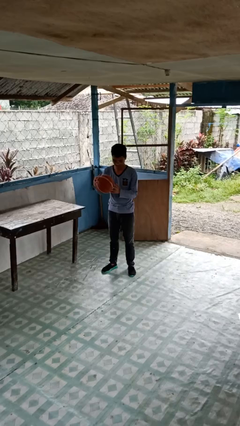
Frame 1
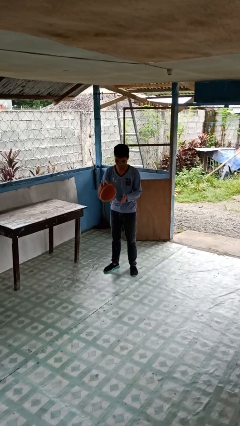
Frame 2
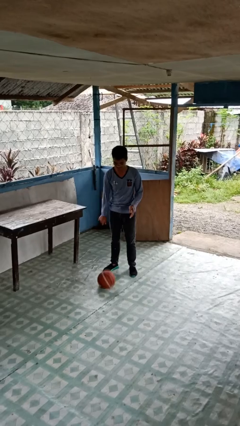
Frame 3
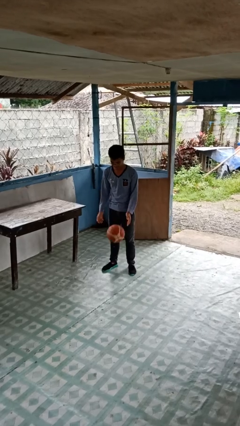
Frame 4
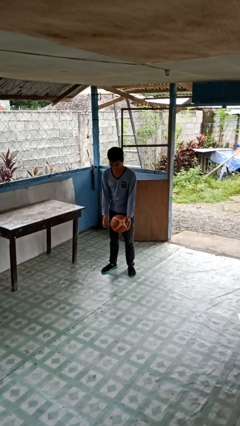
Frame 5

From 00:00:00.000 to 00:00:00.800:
person bounces ball on floor

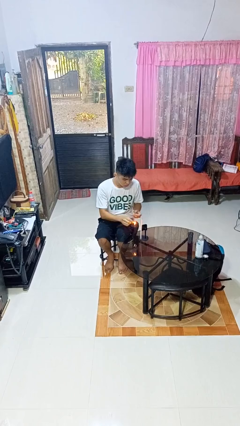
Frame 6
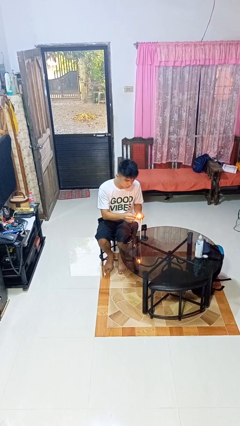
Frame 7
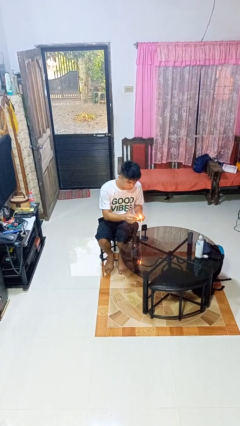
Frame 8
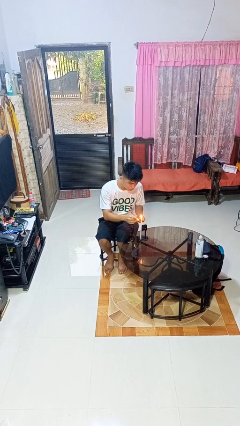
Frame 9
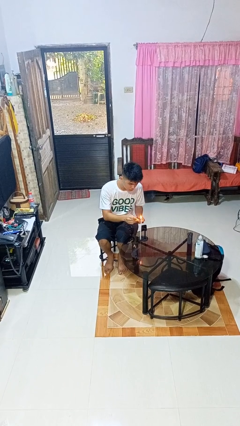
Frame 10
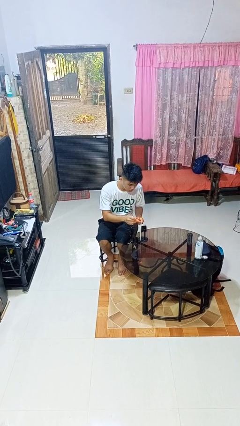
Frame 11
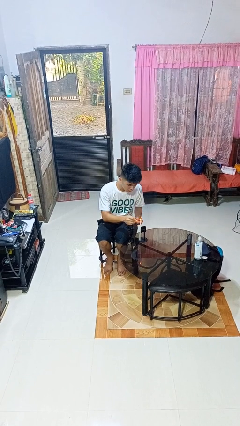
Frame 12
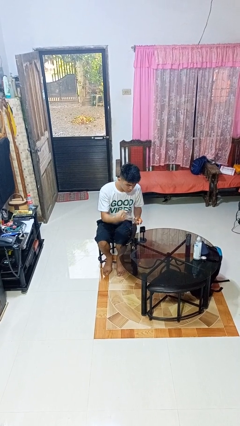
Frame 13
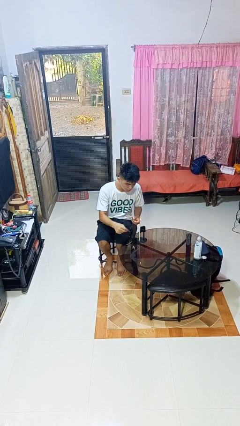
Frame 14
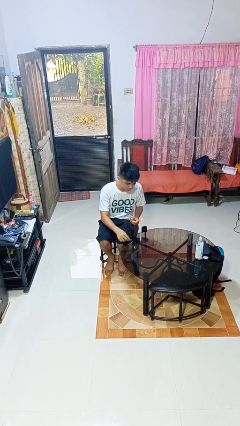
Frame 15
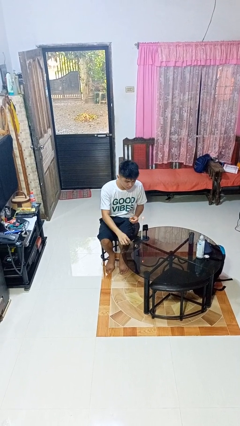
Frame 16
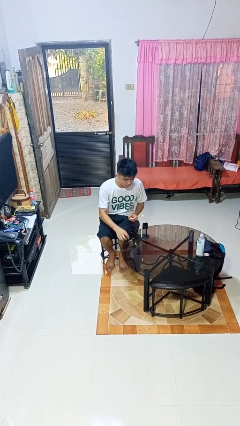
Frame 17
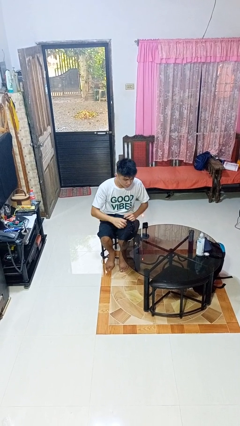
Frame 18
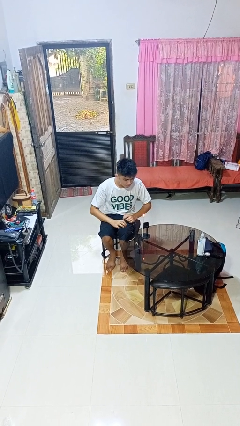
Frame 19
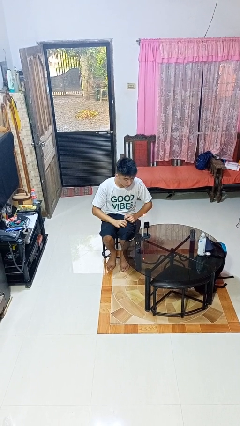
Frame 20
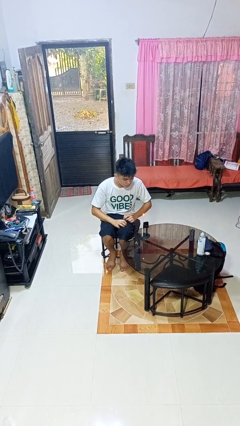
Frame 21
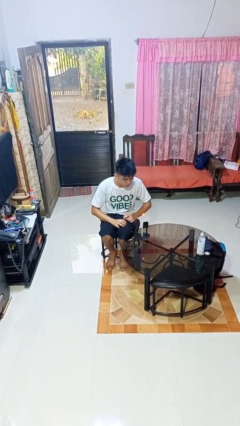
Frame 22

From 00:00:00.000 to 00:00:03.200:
person lights candle

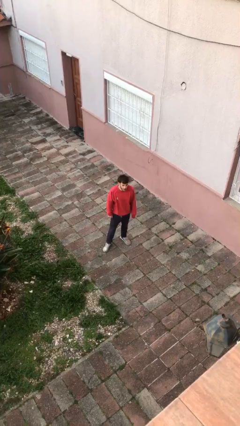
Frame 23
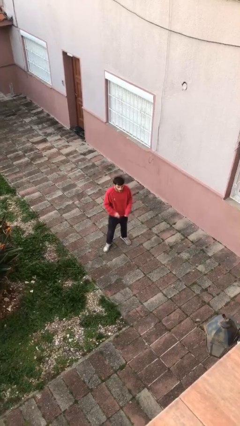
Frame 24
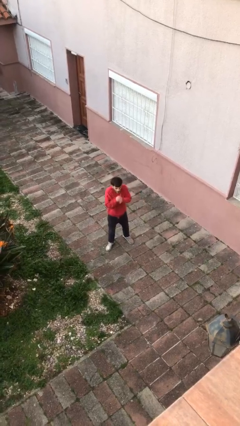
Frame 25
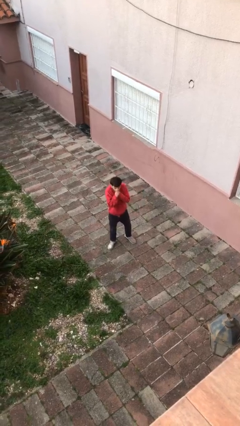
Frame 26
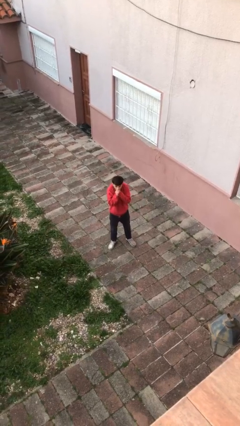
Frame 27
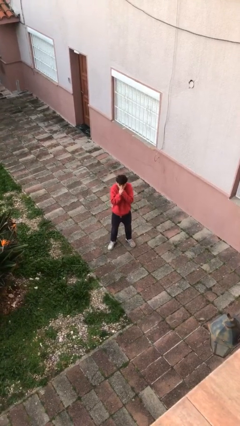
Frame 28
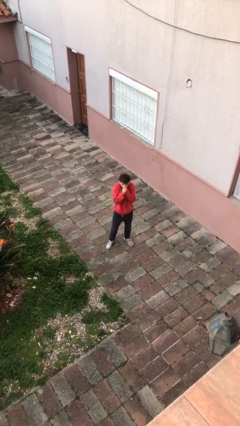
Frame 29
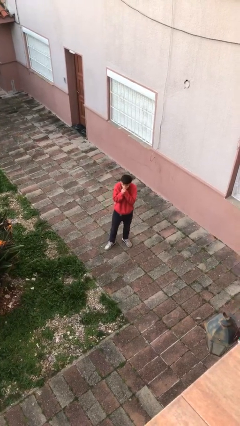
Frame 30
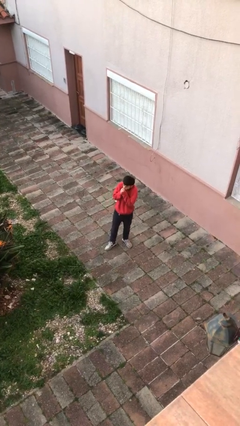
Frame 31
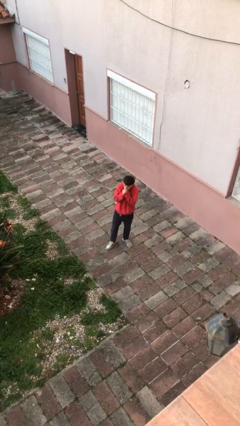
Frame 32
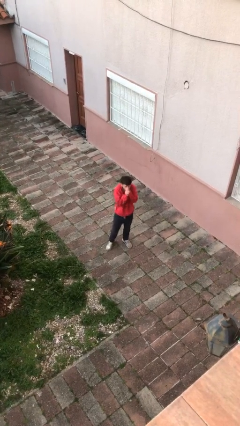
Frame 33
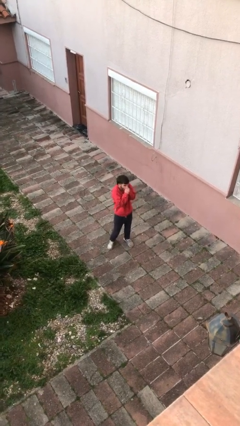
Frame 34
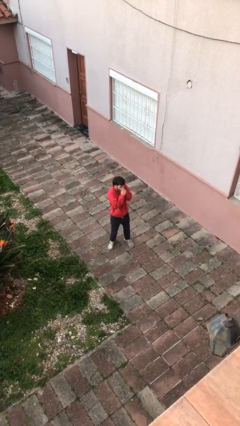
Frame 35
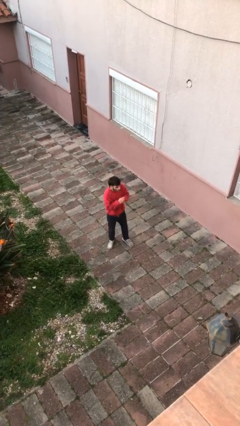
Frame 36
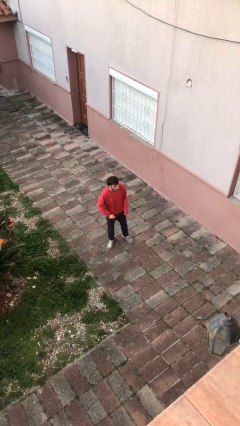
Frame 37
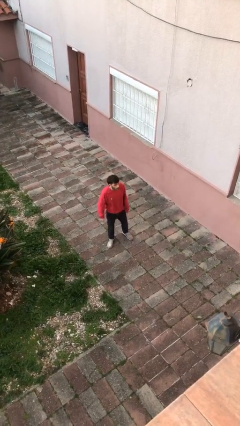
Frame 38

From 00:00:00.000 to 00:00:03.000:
person blows into hands

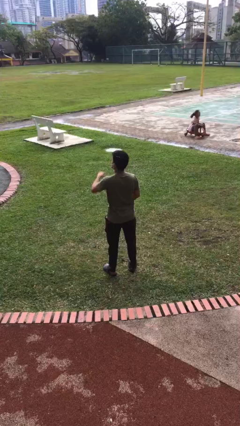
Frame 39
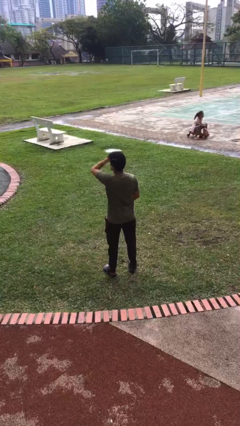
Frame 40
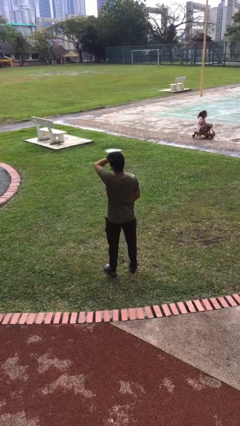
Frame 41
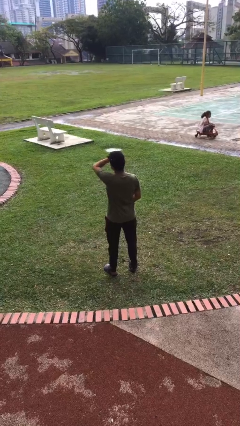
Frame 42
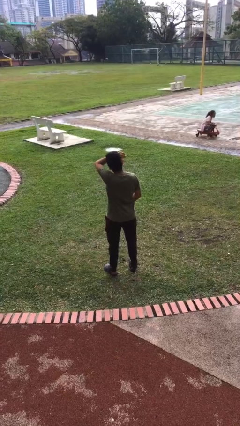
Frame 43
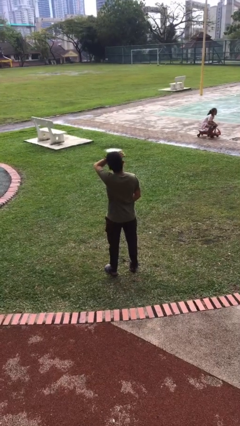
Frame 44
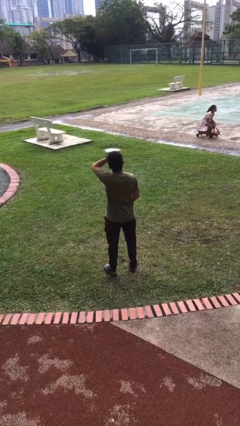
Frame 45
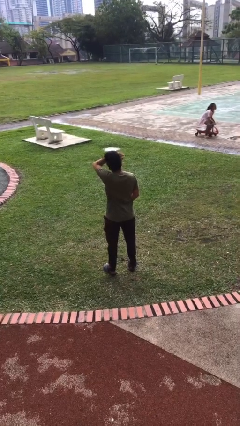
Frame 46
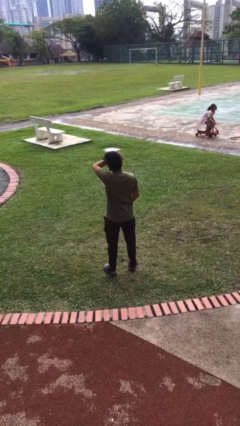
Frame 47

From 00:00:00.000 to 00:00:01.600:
person rubs eyes

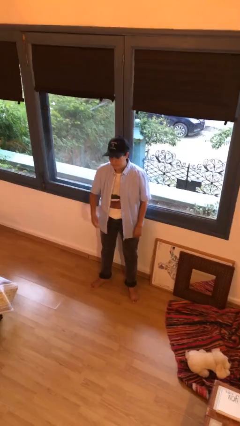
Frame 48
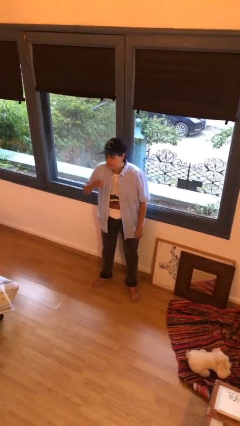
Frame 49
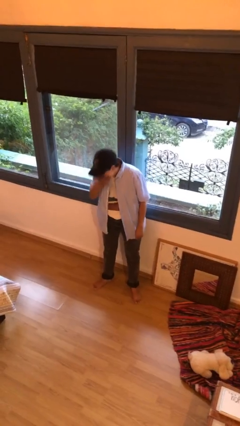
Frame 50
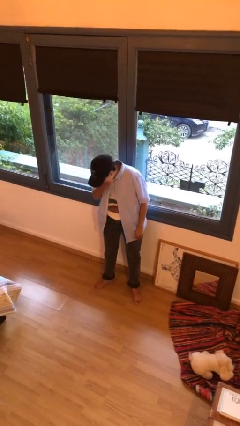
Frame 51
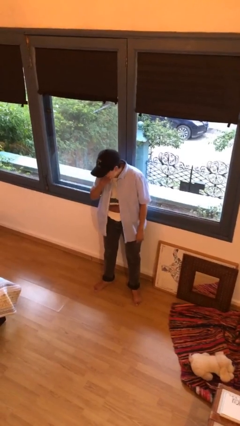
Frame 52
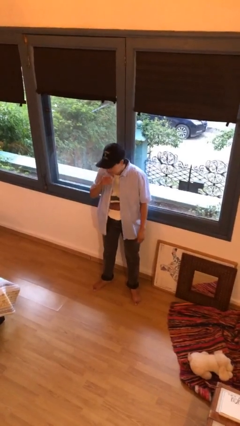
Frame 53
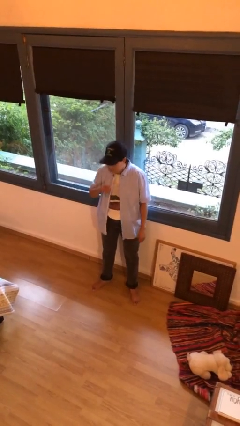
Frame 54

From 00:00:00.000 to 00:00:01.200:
person sneezes into hand

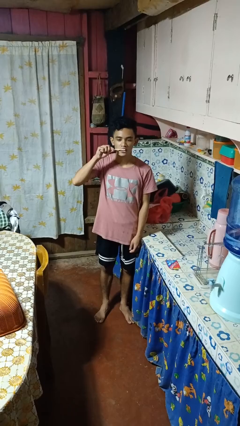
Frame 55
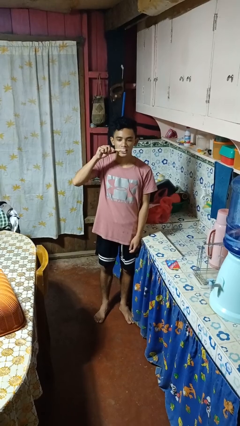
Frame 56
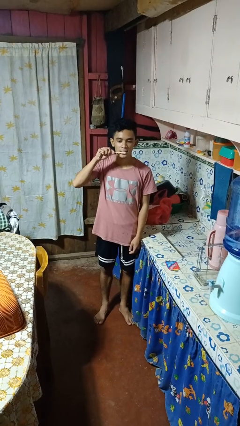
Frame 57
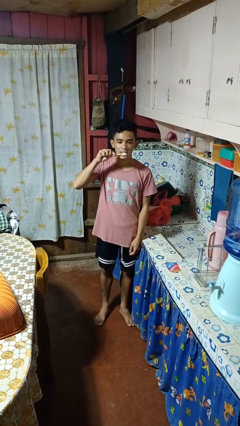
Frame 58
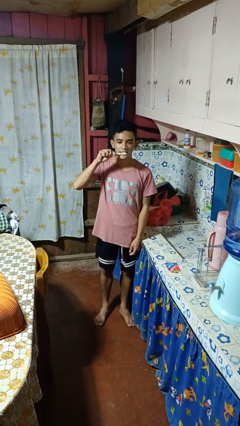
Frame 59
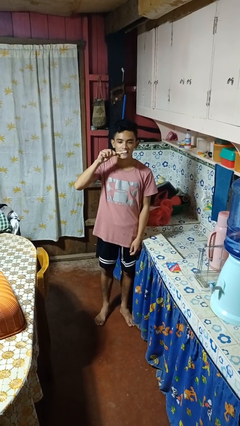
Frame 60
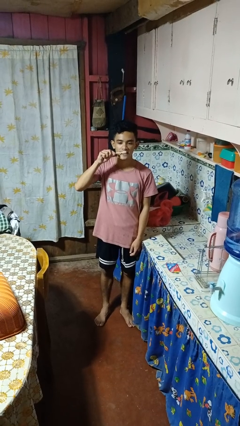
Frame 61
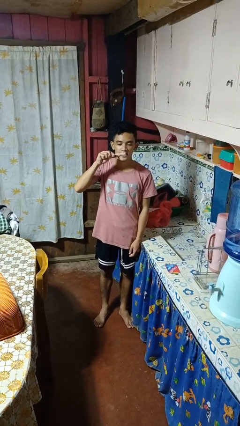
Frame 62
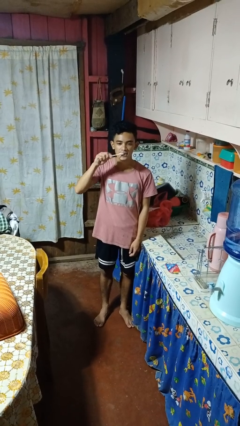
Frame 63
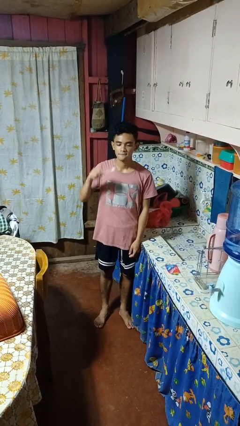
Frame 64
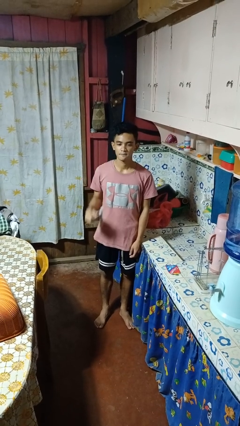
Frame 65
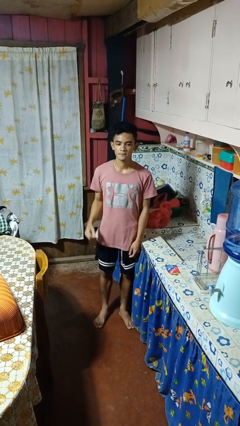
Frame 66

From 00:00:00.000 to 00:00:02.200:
person brushes teeth

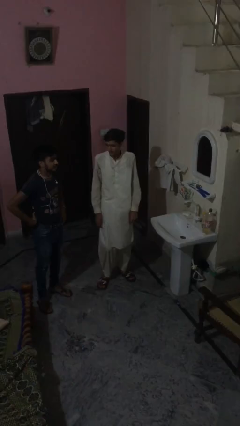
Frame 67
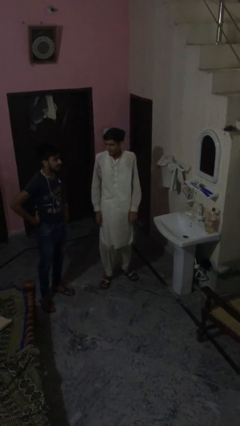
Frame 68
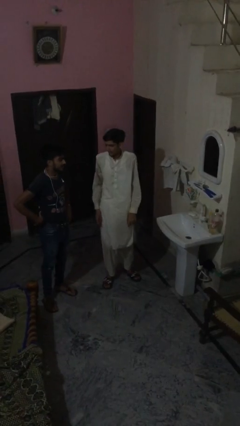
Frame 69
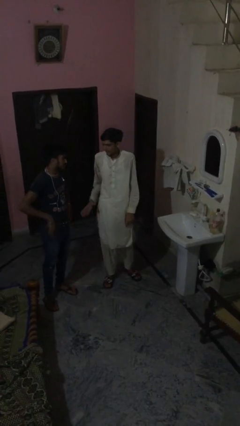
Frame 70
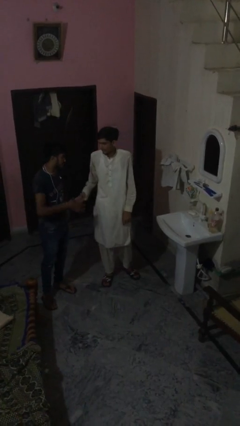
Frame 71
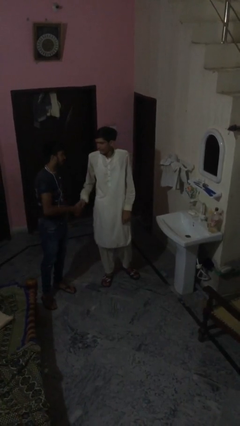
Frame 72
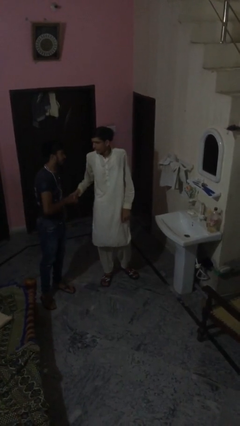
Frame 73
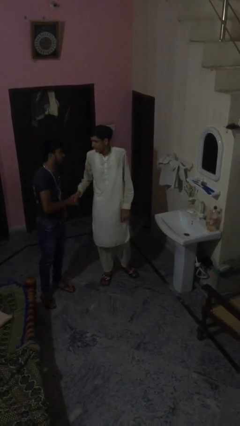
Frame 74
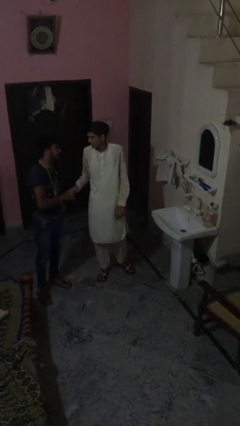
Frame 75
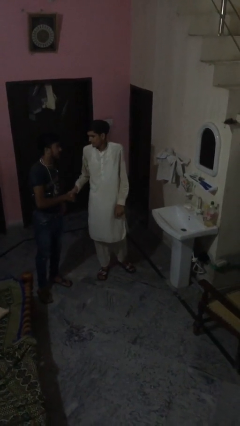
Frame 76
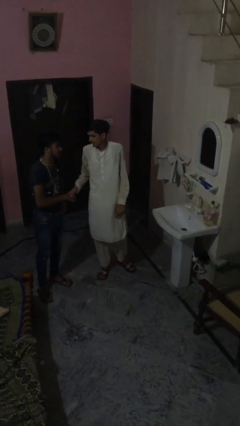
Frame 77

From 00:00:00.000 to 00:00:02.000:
person shakes hand

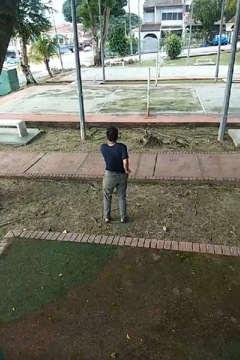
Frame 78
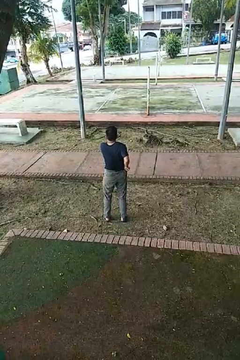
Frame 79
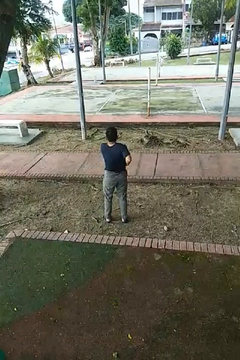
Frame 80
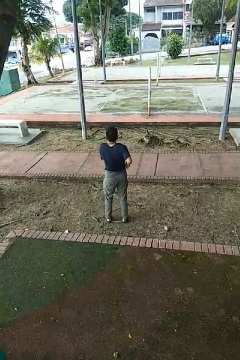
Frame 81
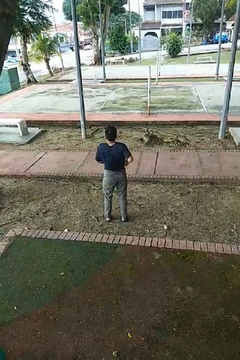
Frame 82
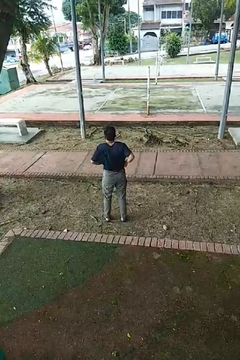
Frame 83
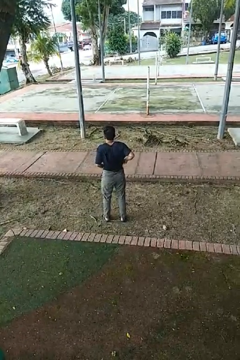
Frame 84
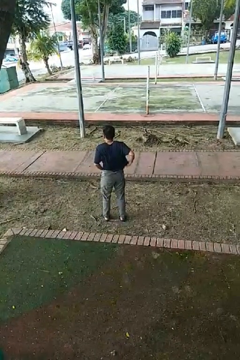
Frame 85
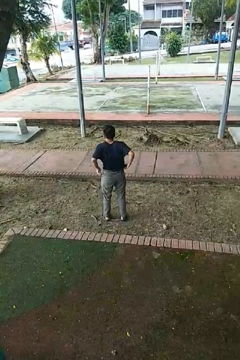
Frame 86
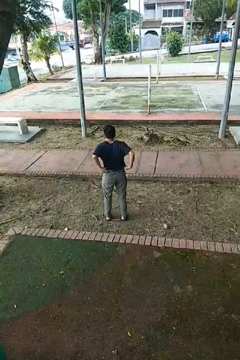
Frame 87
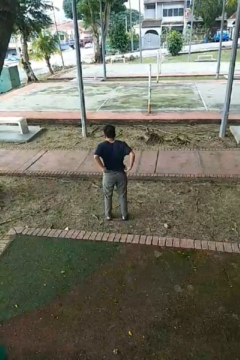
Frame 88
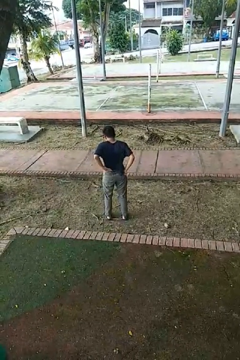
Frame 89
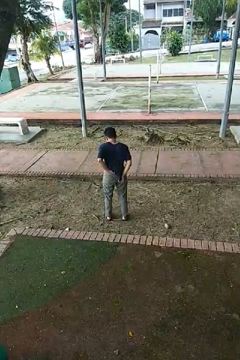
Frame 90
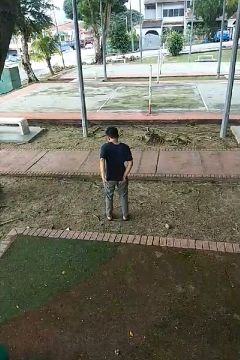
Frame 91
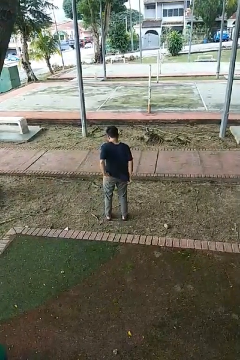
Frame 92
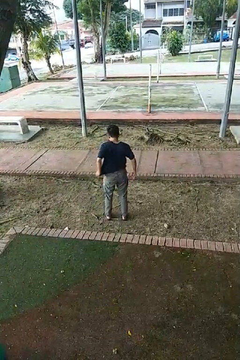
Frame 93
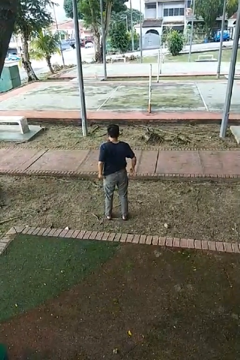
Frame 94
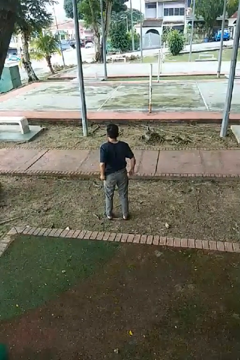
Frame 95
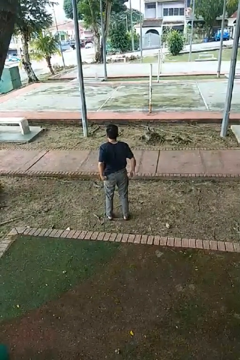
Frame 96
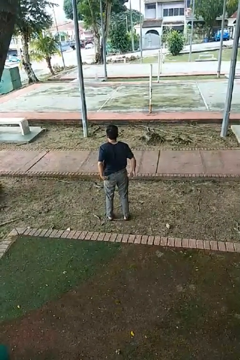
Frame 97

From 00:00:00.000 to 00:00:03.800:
person untucks shirt

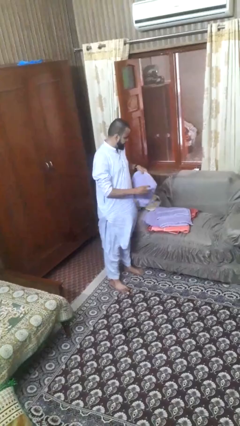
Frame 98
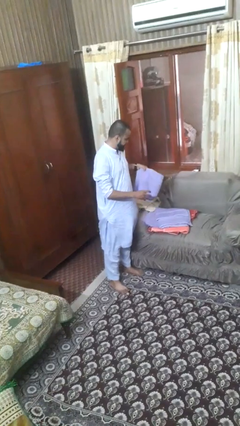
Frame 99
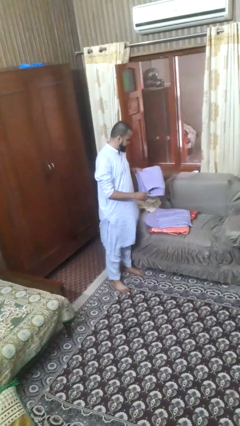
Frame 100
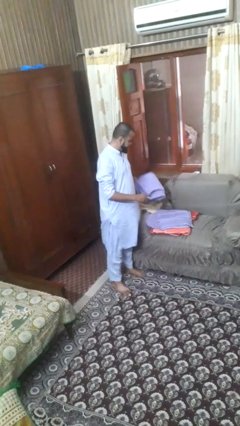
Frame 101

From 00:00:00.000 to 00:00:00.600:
person folds towel
